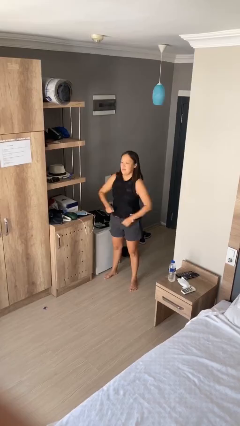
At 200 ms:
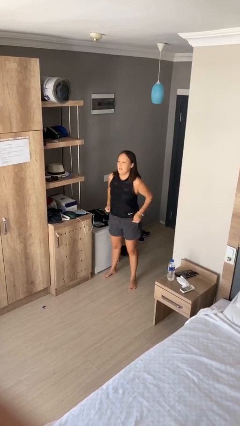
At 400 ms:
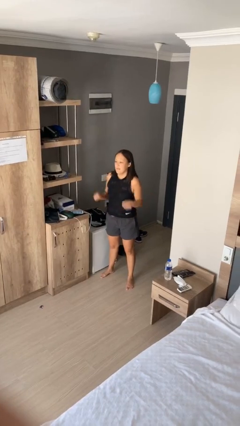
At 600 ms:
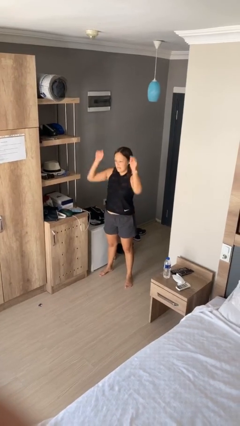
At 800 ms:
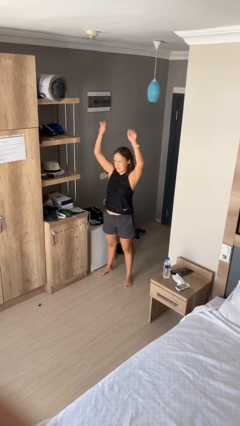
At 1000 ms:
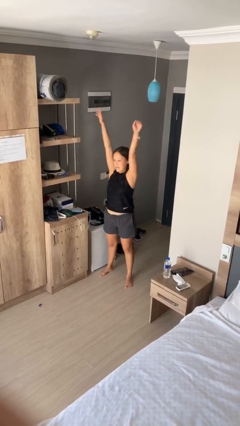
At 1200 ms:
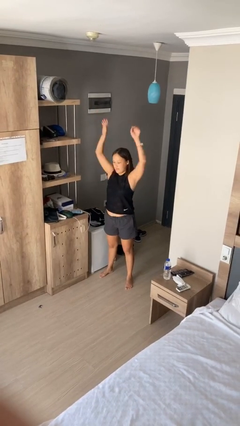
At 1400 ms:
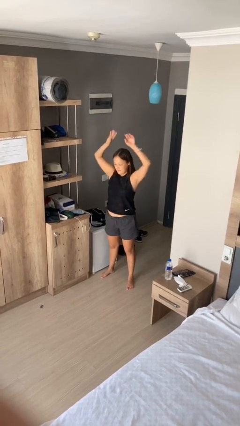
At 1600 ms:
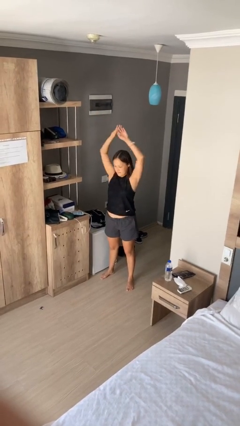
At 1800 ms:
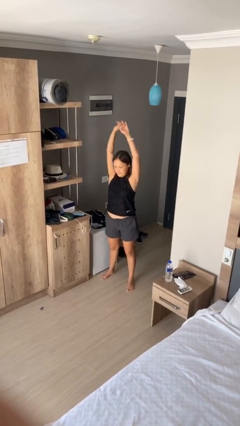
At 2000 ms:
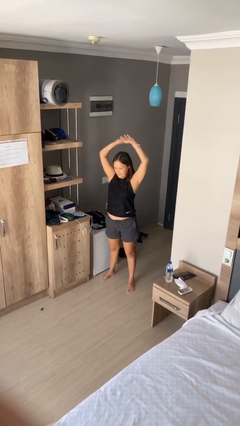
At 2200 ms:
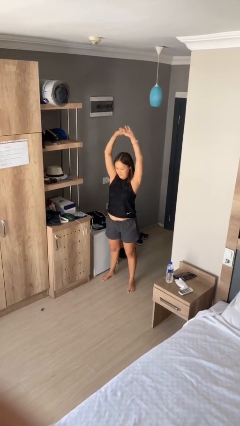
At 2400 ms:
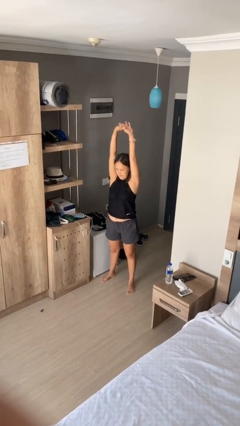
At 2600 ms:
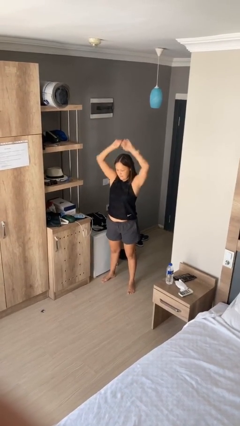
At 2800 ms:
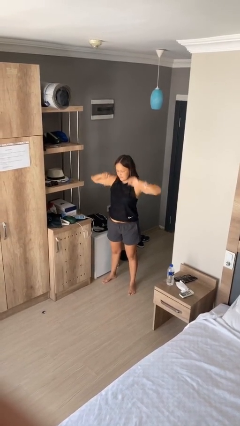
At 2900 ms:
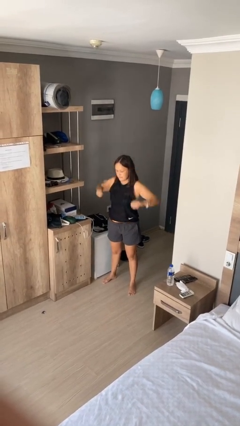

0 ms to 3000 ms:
person stretches arms over head

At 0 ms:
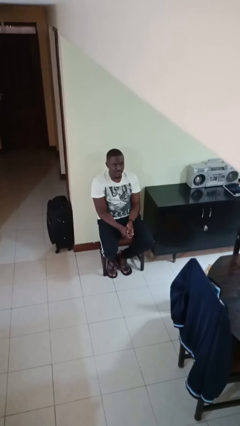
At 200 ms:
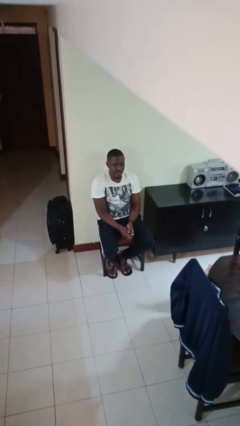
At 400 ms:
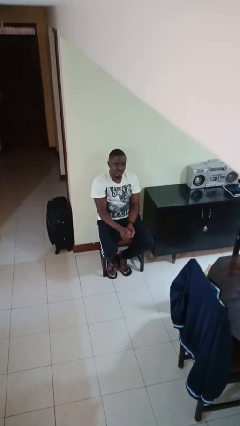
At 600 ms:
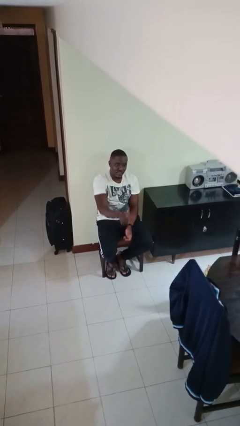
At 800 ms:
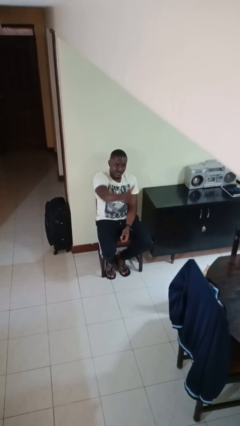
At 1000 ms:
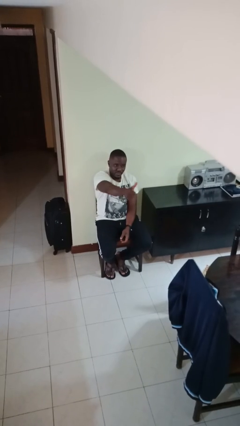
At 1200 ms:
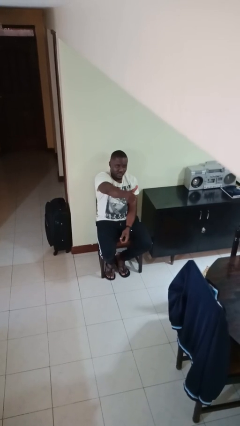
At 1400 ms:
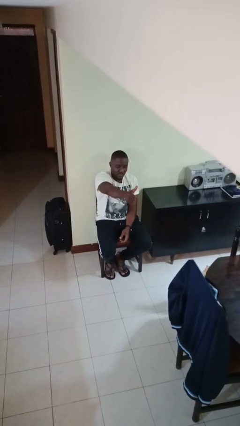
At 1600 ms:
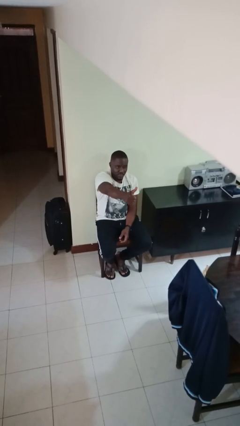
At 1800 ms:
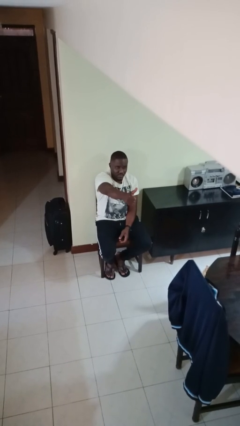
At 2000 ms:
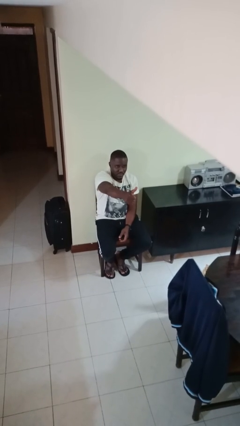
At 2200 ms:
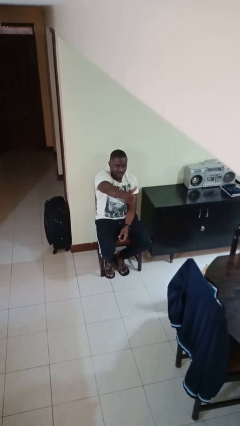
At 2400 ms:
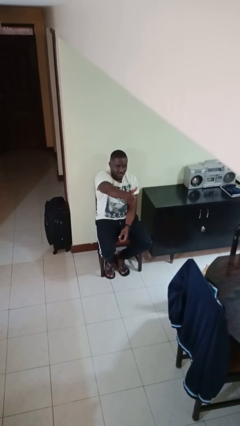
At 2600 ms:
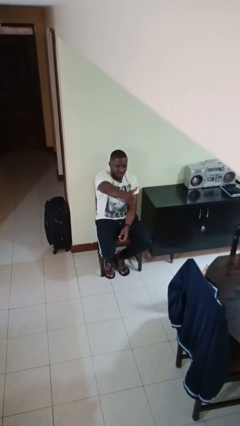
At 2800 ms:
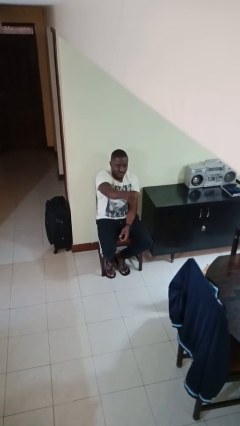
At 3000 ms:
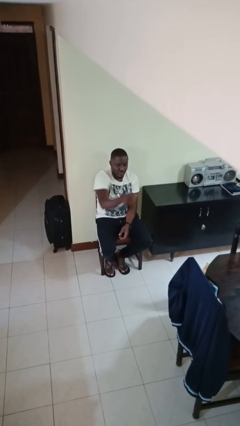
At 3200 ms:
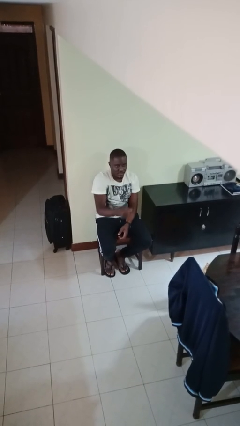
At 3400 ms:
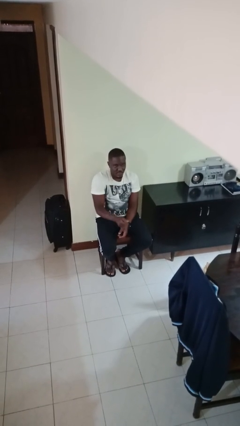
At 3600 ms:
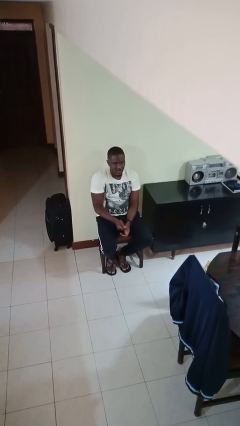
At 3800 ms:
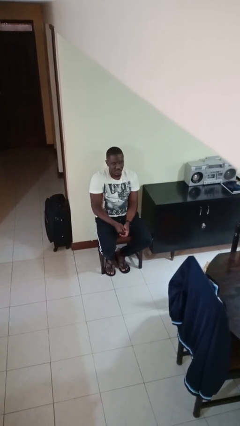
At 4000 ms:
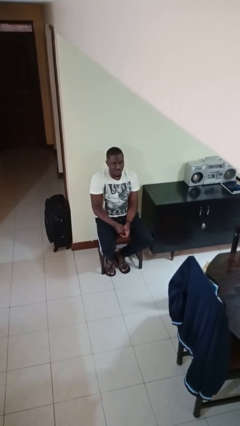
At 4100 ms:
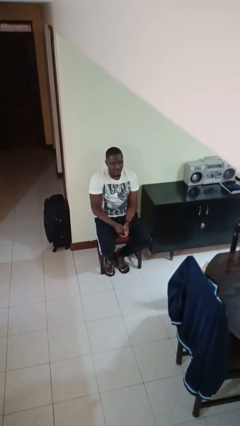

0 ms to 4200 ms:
person gestures thumbs up

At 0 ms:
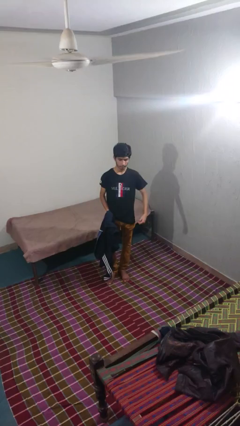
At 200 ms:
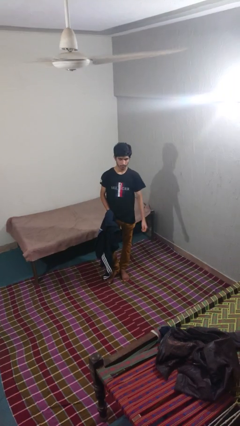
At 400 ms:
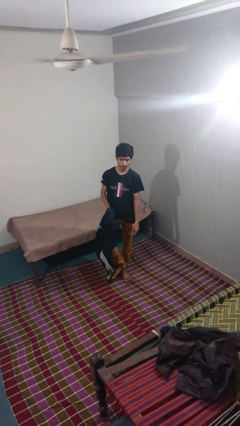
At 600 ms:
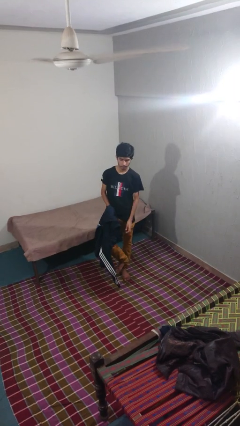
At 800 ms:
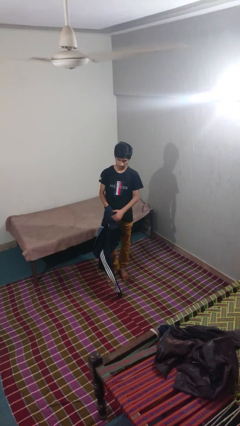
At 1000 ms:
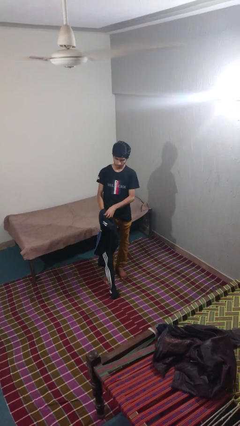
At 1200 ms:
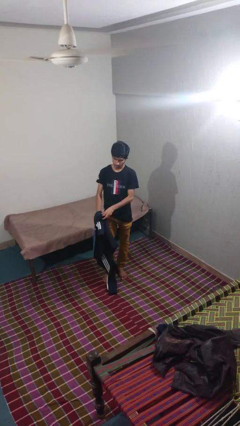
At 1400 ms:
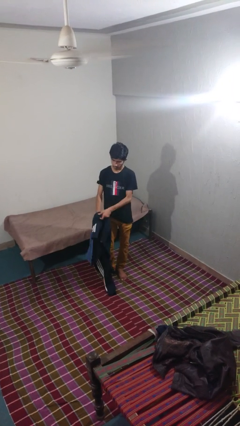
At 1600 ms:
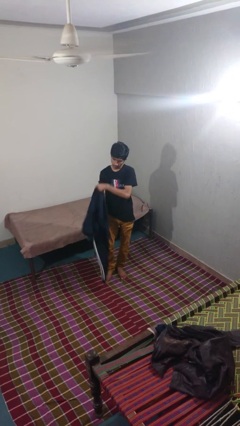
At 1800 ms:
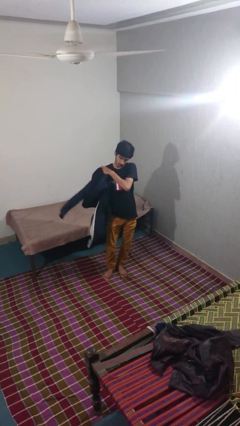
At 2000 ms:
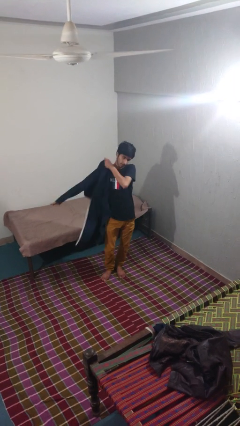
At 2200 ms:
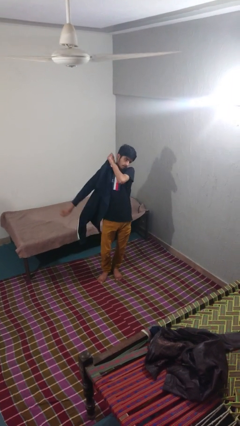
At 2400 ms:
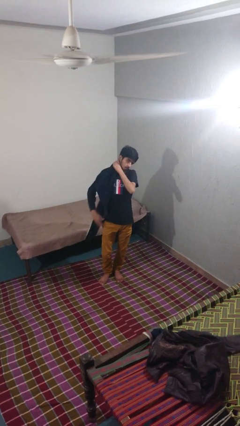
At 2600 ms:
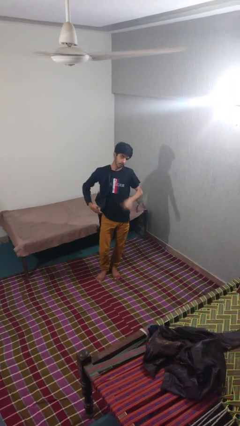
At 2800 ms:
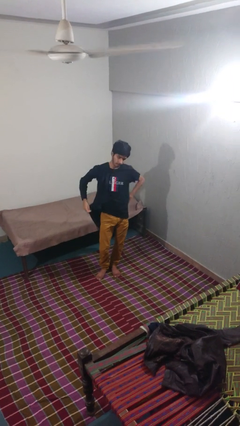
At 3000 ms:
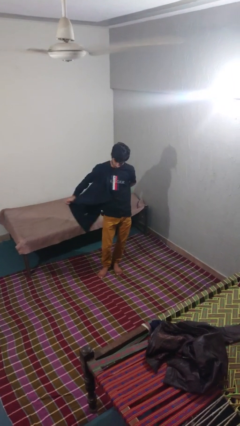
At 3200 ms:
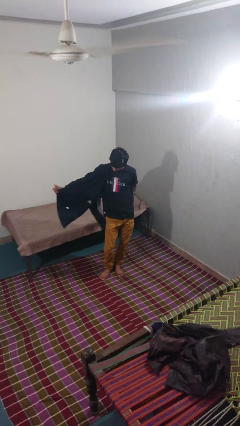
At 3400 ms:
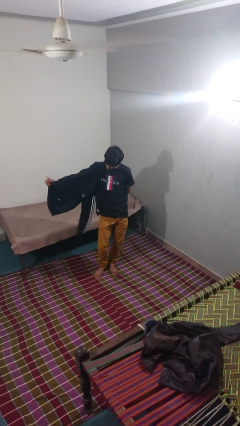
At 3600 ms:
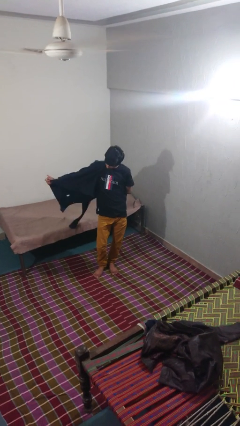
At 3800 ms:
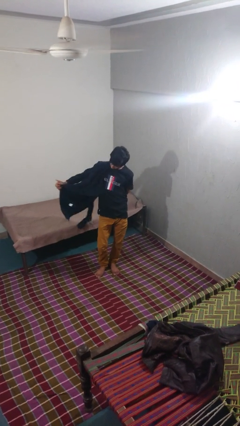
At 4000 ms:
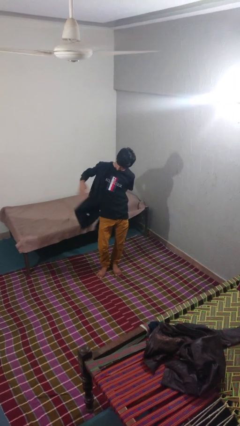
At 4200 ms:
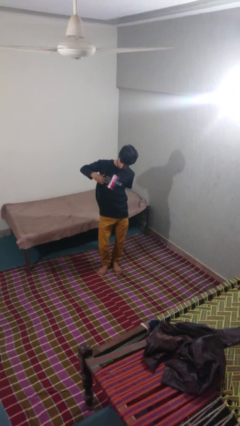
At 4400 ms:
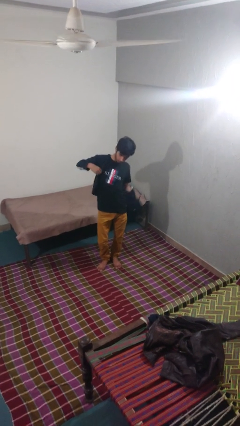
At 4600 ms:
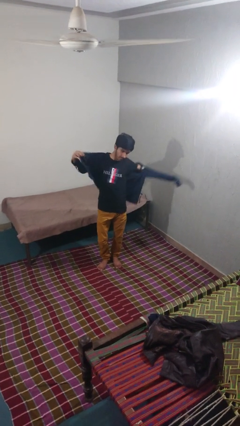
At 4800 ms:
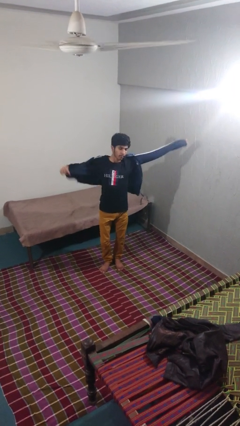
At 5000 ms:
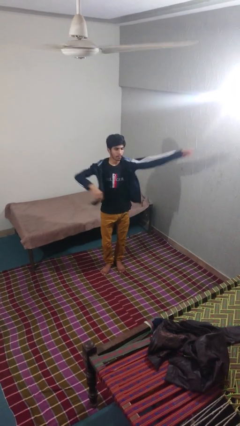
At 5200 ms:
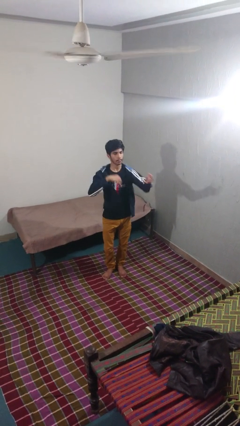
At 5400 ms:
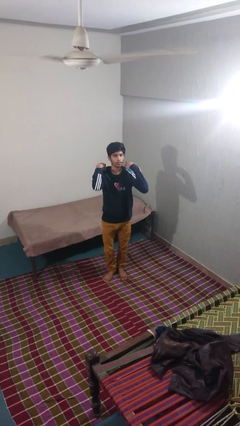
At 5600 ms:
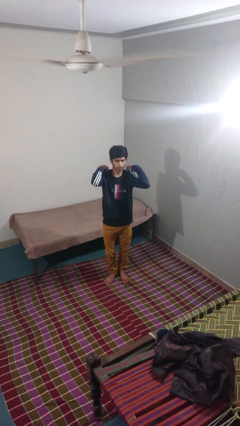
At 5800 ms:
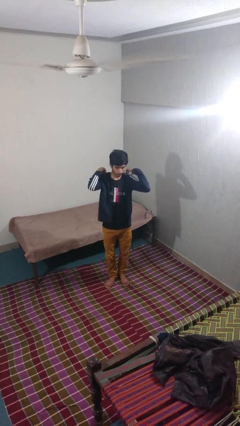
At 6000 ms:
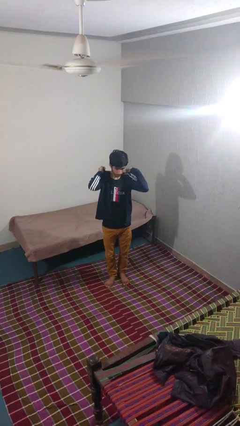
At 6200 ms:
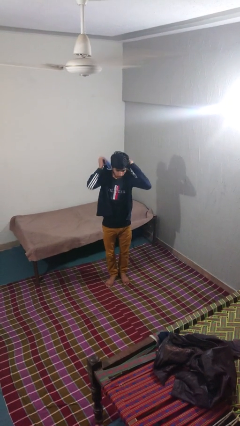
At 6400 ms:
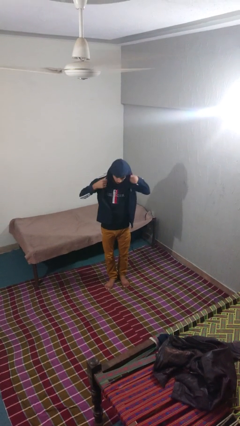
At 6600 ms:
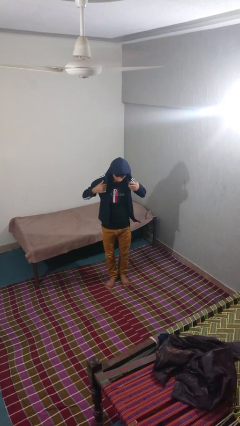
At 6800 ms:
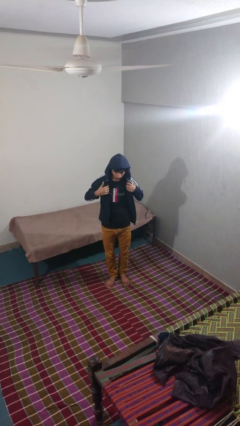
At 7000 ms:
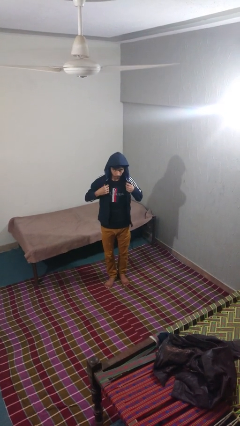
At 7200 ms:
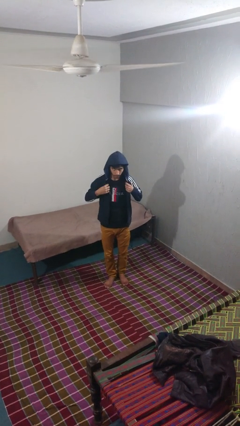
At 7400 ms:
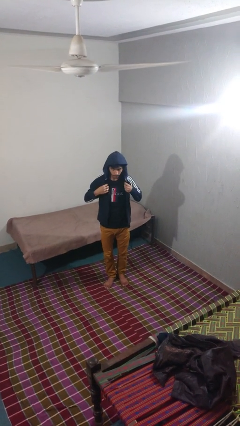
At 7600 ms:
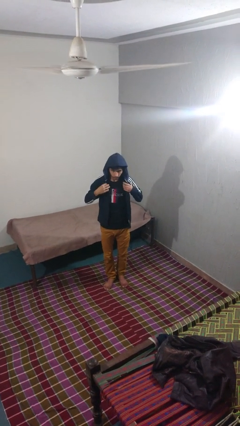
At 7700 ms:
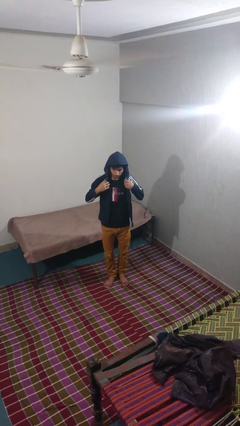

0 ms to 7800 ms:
person puts on hoodie

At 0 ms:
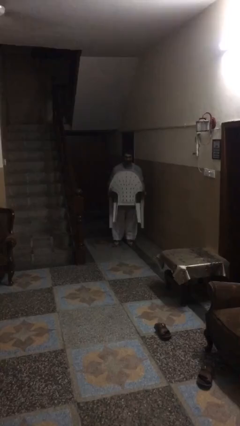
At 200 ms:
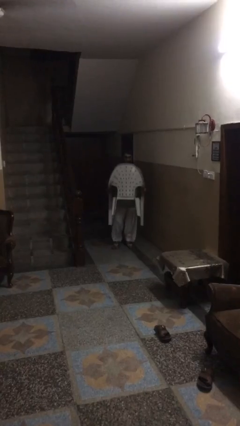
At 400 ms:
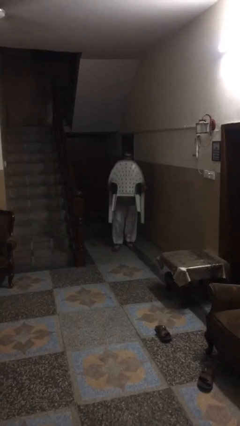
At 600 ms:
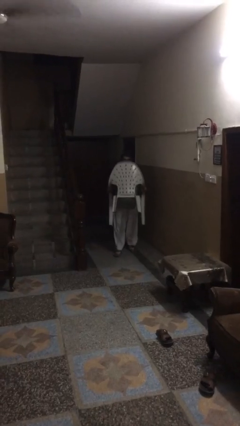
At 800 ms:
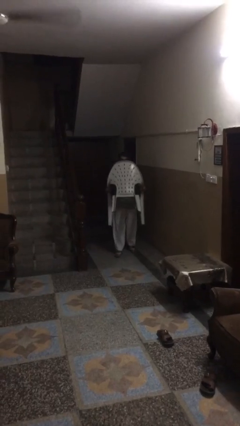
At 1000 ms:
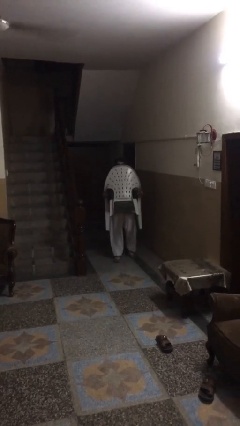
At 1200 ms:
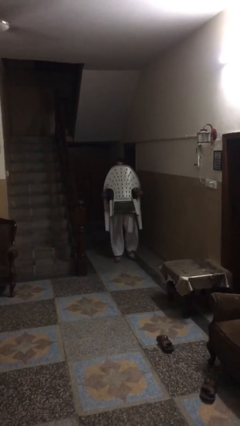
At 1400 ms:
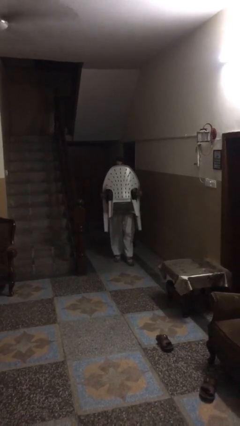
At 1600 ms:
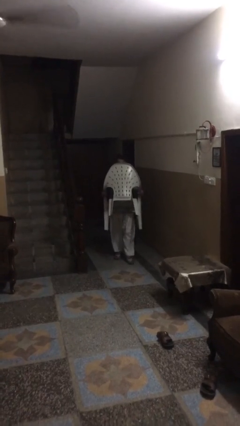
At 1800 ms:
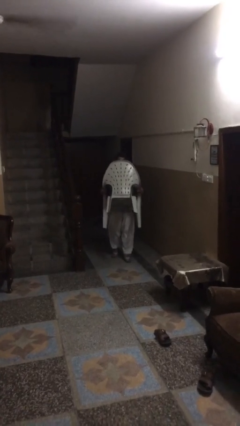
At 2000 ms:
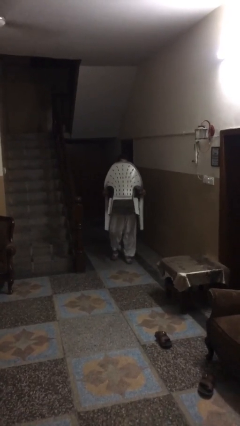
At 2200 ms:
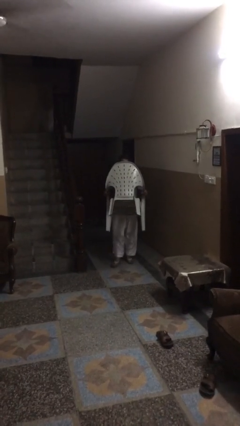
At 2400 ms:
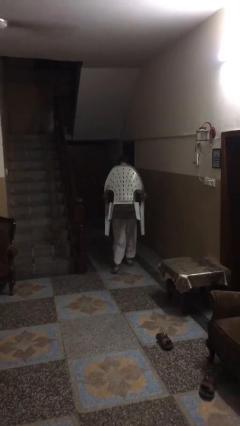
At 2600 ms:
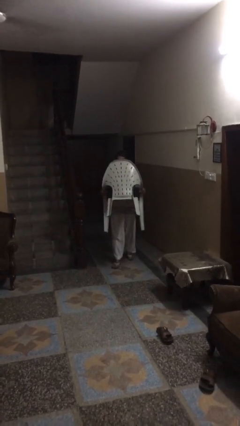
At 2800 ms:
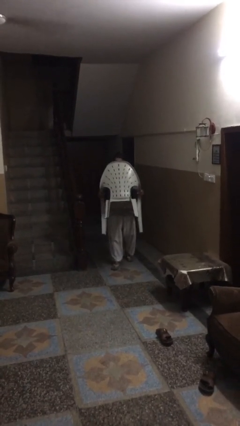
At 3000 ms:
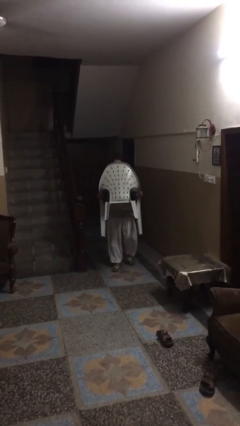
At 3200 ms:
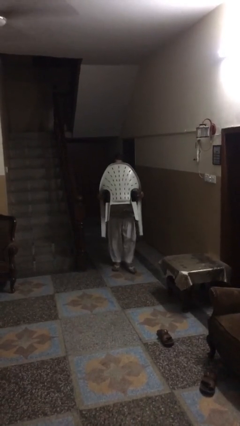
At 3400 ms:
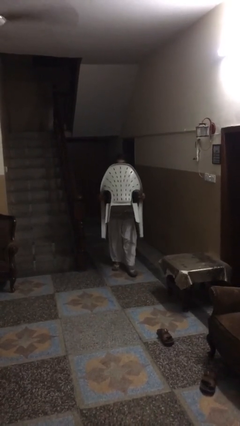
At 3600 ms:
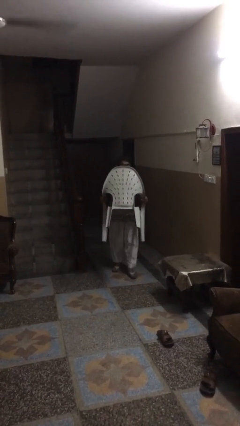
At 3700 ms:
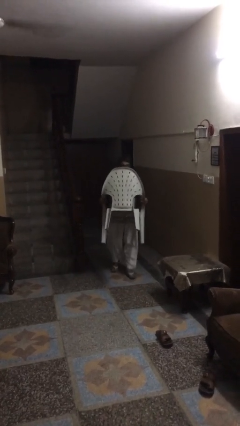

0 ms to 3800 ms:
person carries heavy object
